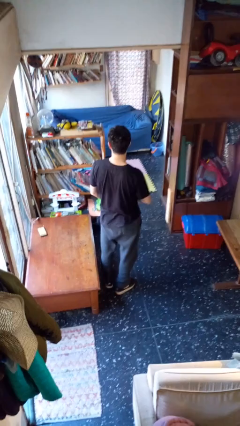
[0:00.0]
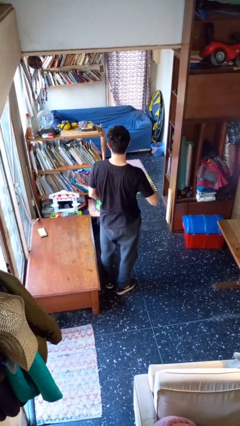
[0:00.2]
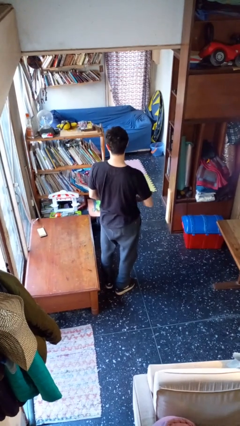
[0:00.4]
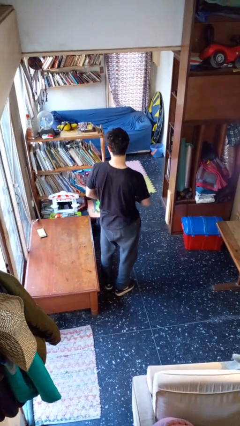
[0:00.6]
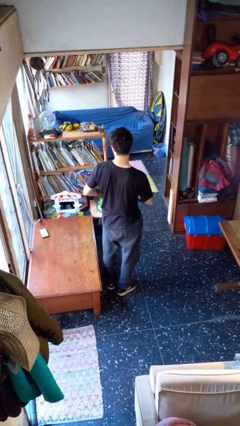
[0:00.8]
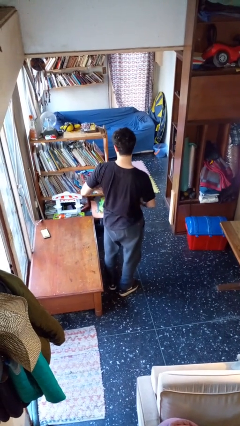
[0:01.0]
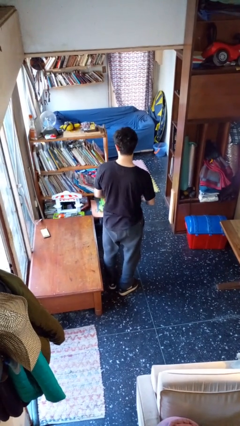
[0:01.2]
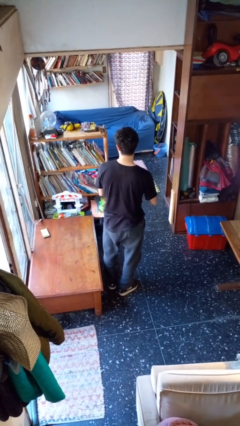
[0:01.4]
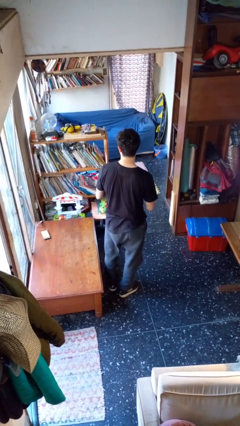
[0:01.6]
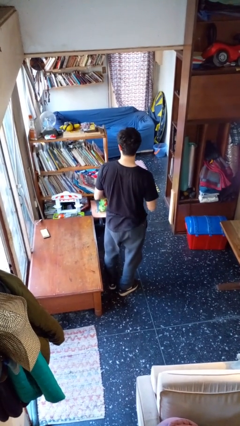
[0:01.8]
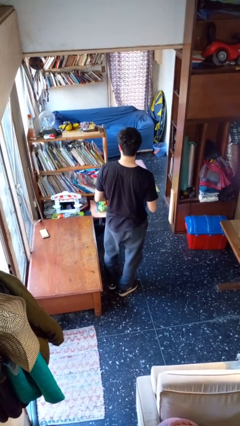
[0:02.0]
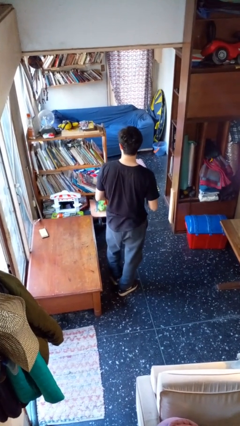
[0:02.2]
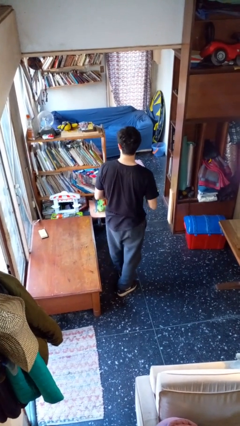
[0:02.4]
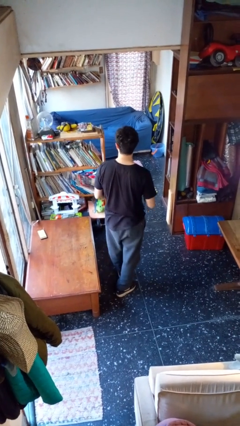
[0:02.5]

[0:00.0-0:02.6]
person takes off gloves

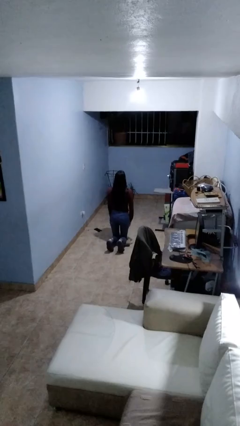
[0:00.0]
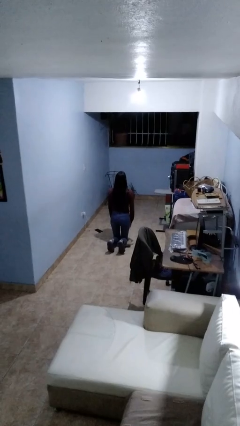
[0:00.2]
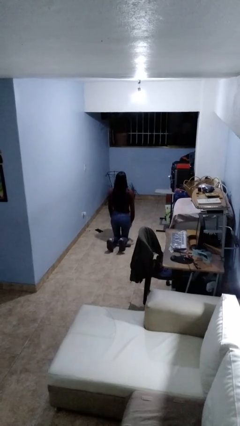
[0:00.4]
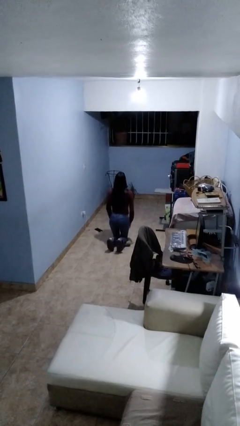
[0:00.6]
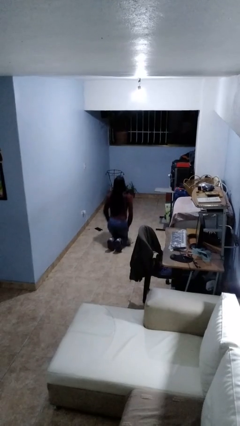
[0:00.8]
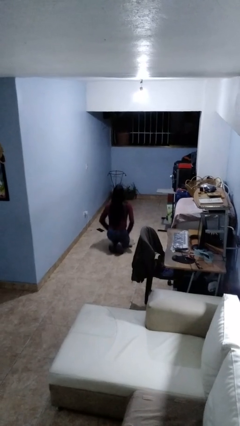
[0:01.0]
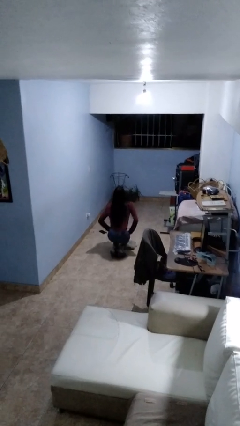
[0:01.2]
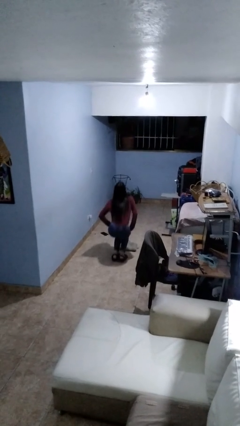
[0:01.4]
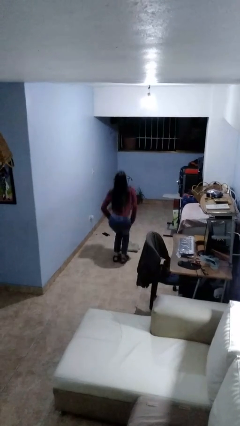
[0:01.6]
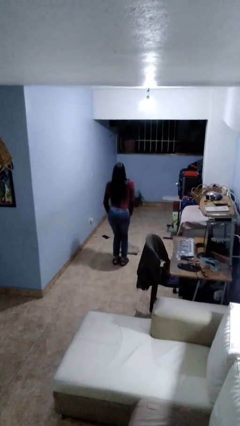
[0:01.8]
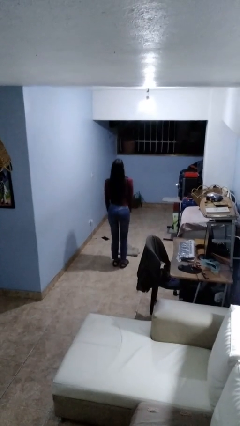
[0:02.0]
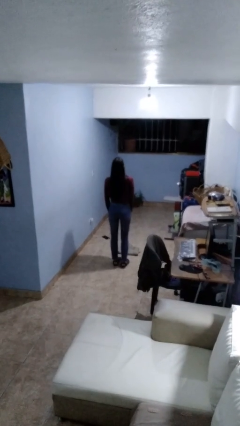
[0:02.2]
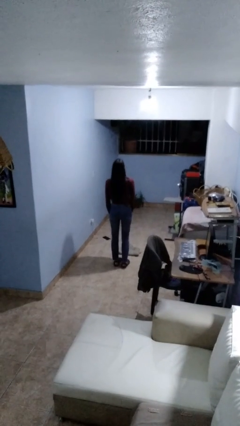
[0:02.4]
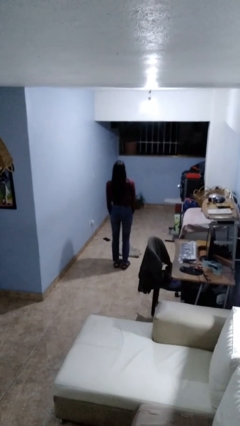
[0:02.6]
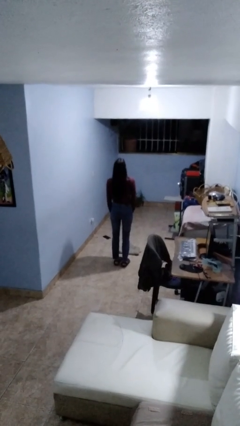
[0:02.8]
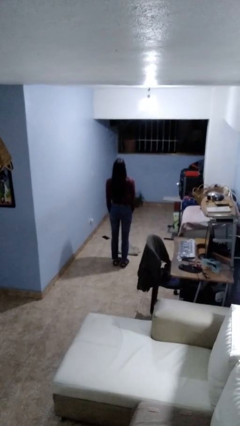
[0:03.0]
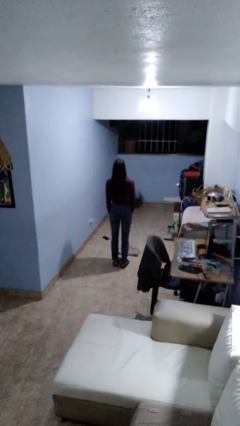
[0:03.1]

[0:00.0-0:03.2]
person stands up from floor

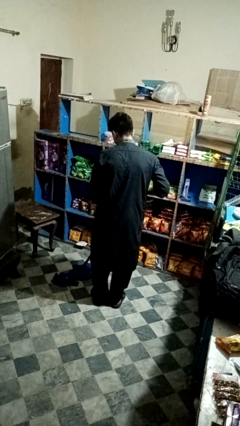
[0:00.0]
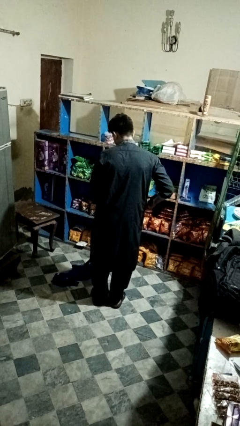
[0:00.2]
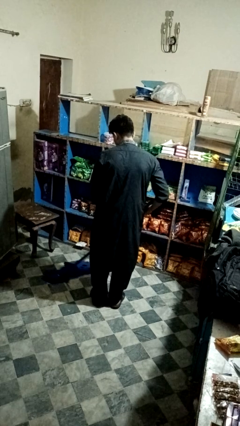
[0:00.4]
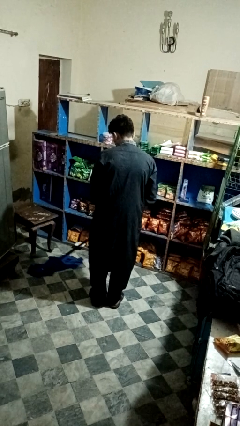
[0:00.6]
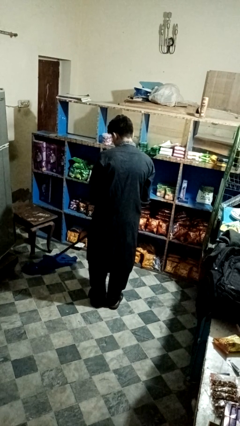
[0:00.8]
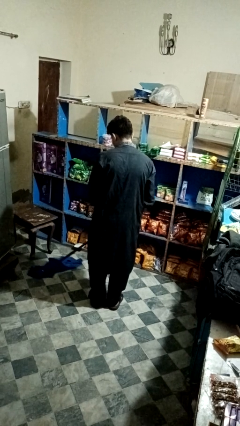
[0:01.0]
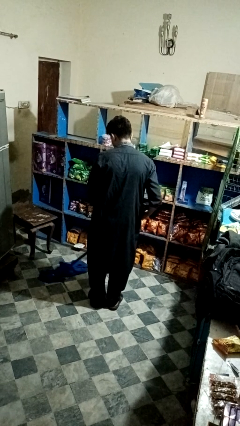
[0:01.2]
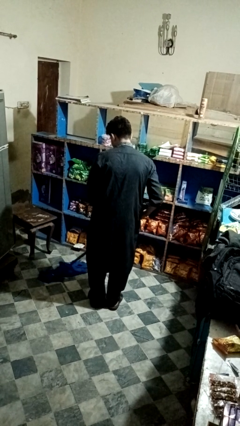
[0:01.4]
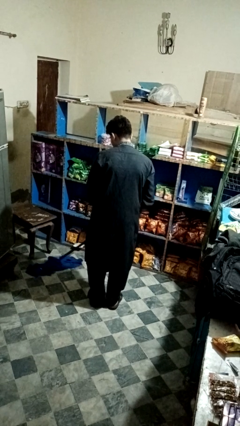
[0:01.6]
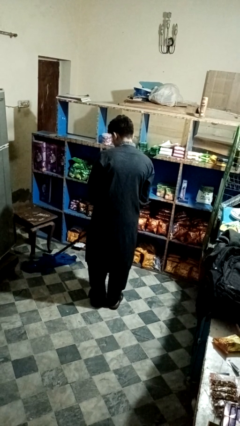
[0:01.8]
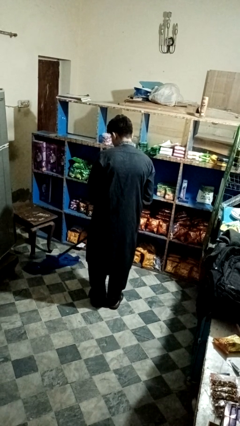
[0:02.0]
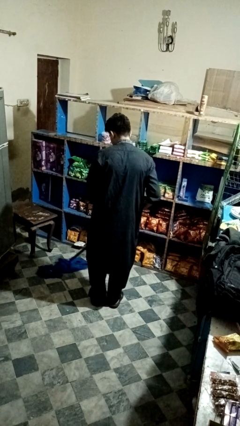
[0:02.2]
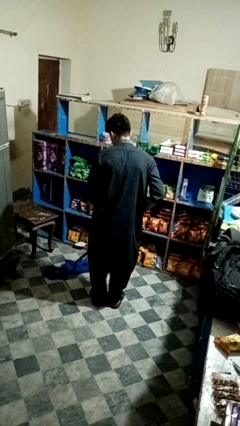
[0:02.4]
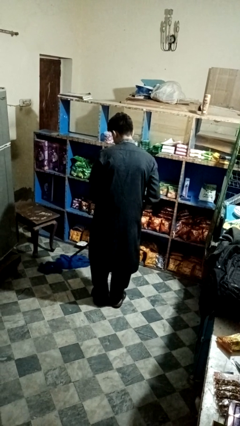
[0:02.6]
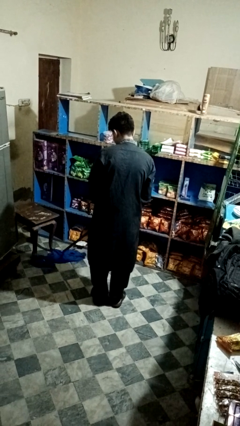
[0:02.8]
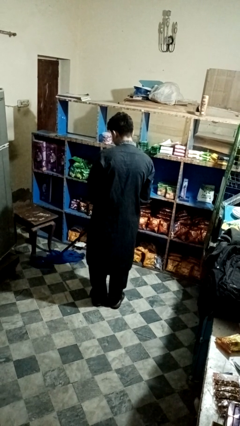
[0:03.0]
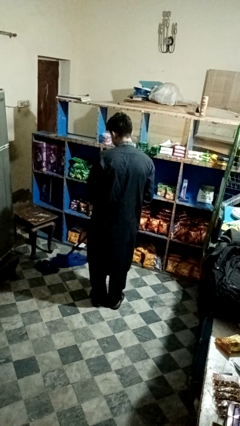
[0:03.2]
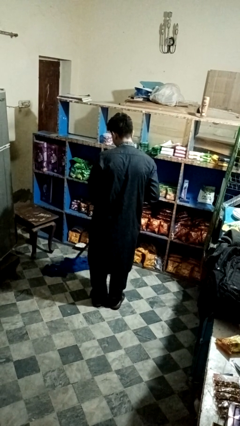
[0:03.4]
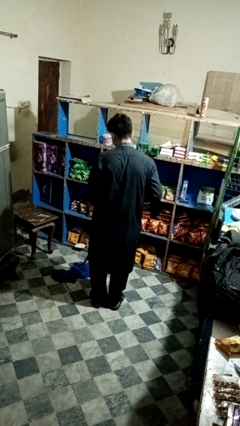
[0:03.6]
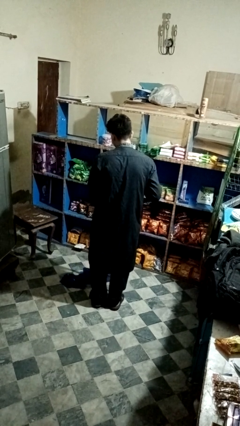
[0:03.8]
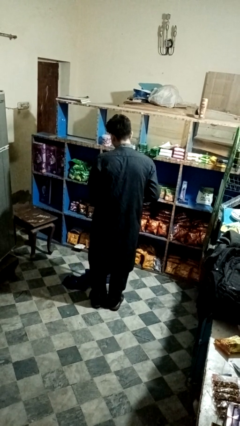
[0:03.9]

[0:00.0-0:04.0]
person mops

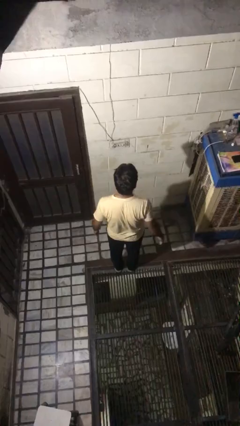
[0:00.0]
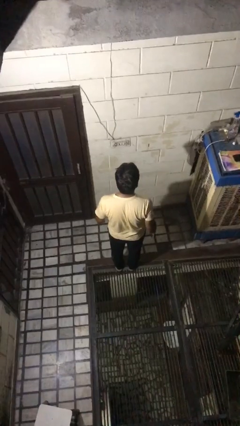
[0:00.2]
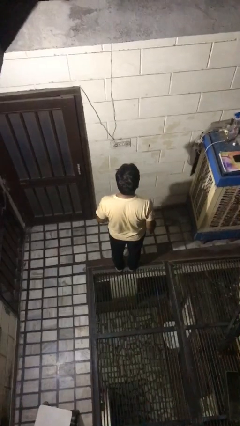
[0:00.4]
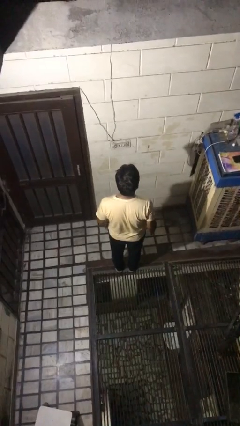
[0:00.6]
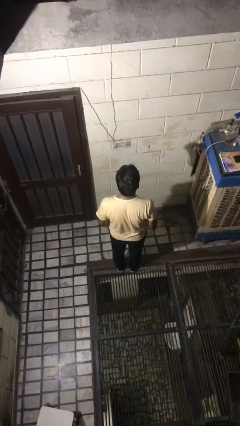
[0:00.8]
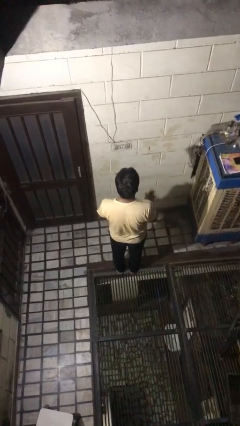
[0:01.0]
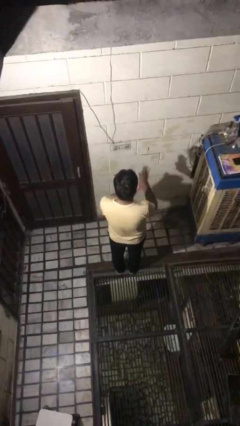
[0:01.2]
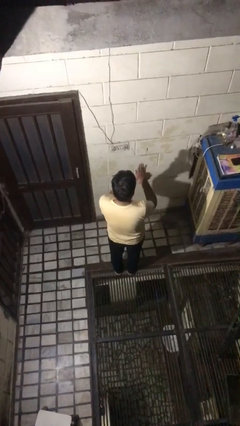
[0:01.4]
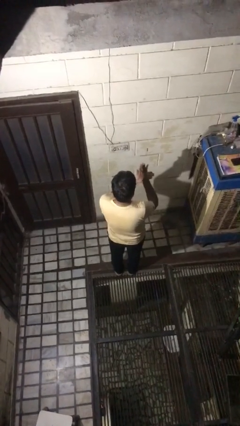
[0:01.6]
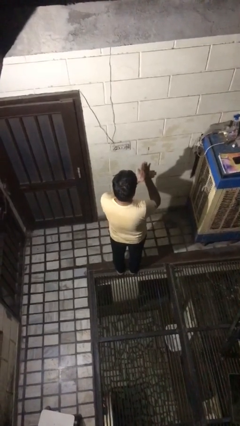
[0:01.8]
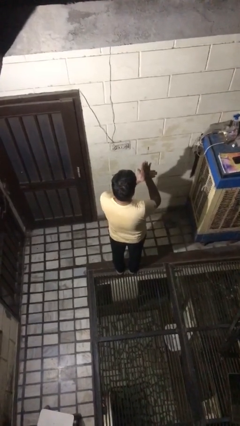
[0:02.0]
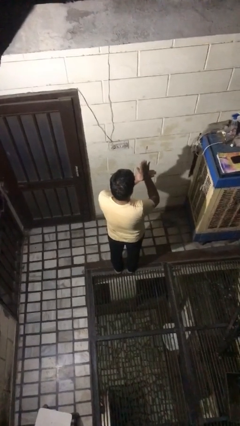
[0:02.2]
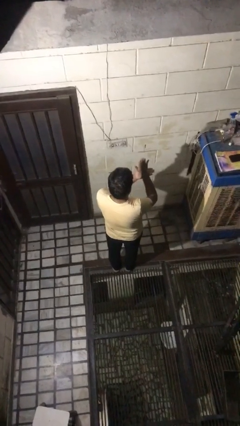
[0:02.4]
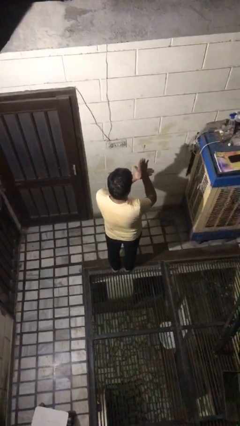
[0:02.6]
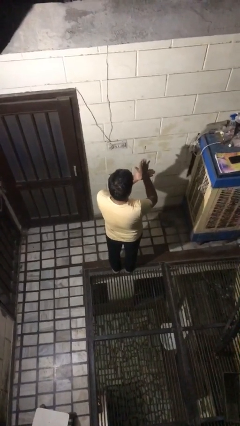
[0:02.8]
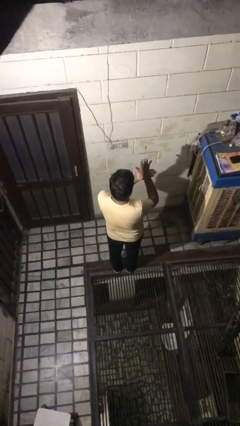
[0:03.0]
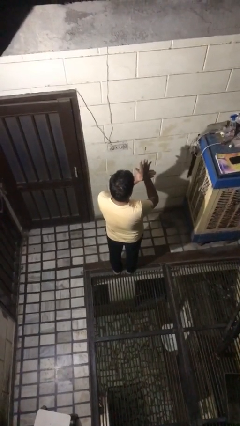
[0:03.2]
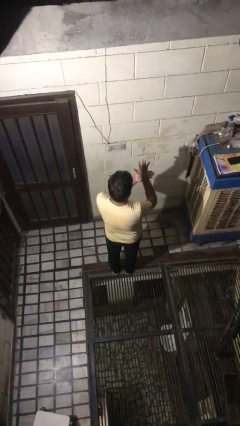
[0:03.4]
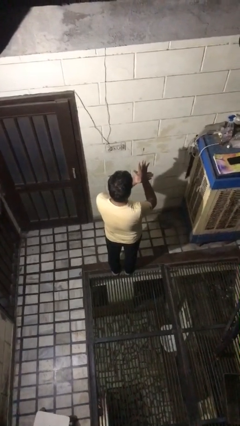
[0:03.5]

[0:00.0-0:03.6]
person gestures number five

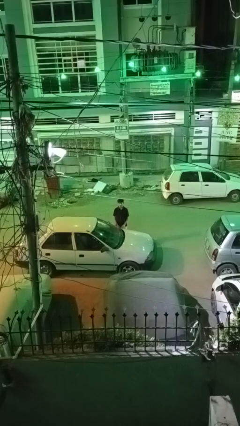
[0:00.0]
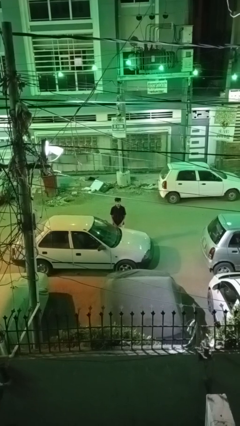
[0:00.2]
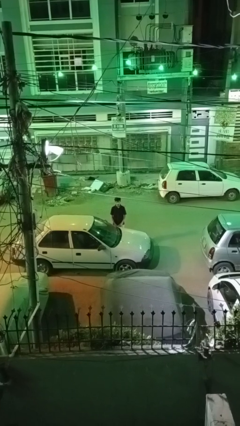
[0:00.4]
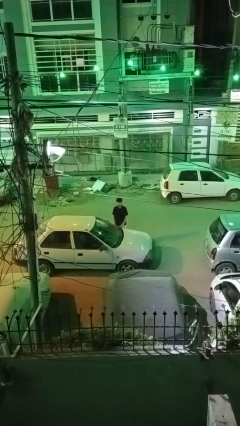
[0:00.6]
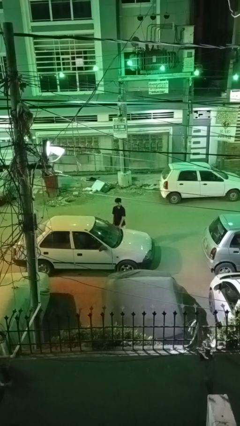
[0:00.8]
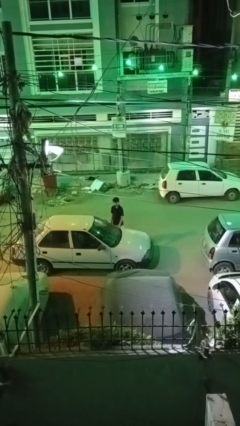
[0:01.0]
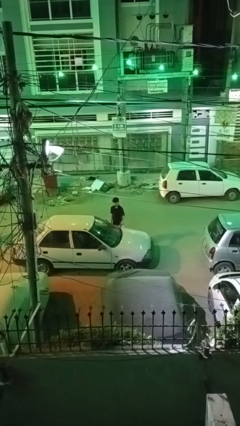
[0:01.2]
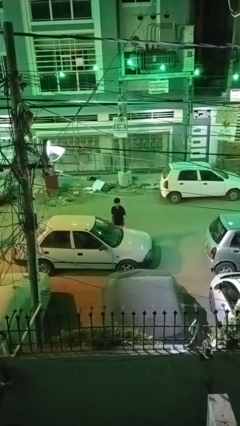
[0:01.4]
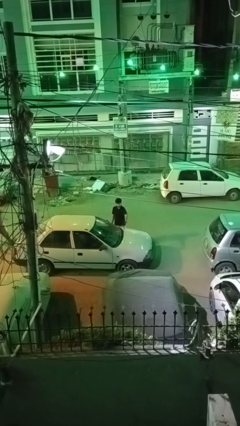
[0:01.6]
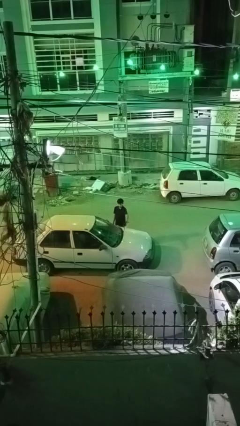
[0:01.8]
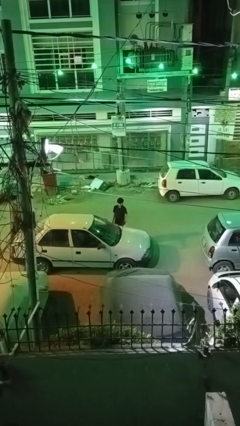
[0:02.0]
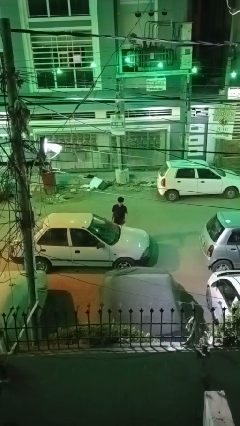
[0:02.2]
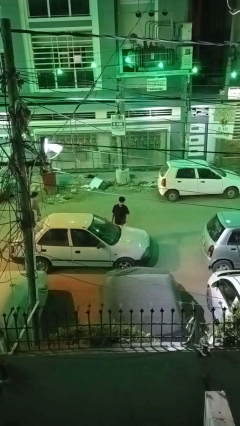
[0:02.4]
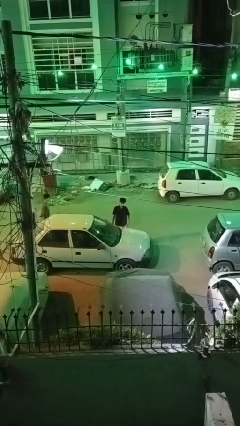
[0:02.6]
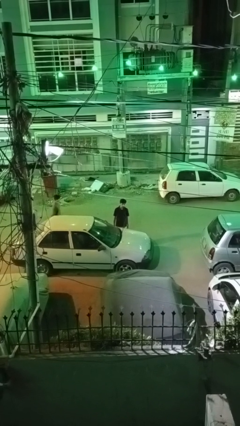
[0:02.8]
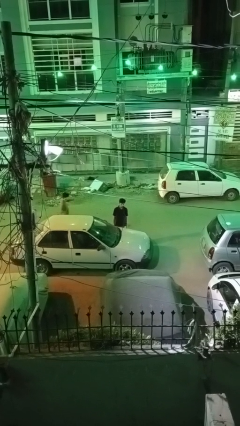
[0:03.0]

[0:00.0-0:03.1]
person flips up car wipers

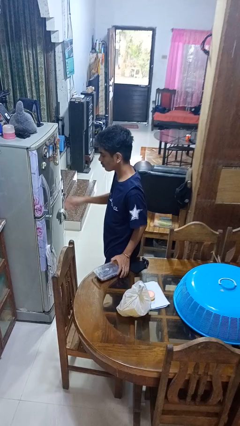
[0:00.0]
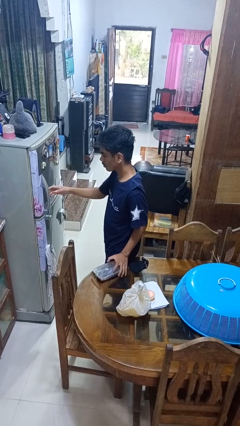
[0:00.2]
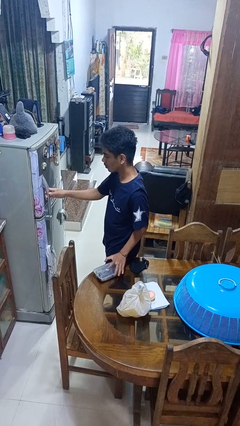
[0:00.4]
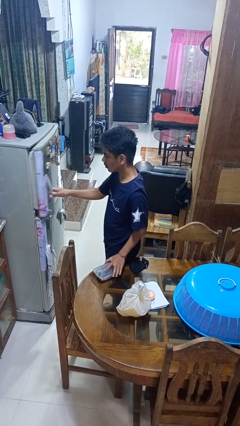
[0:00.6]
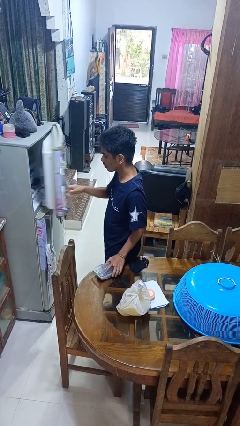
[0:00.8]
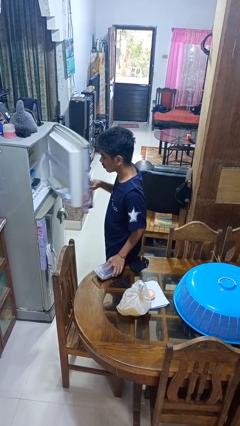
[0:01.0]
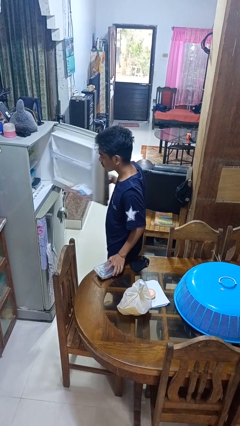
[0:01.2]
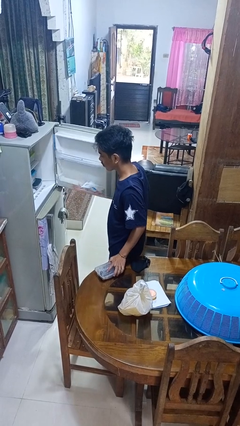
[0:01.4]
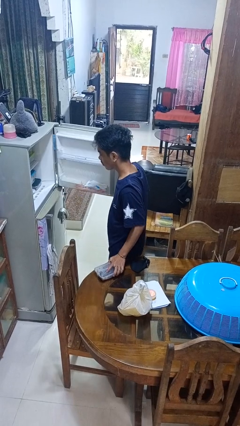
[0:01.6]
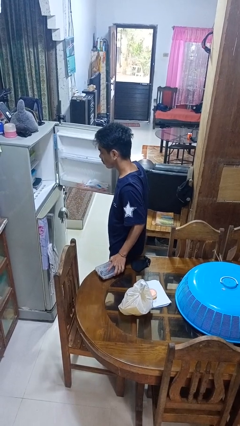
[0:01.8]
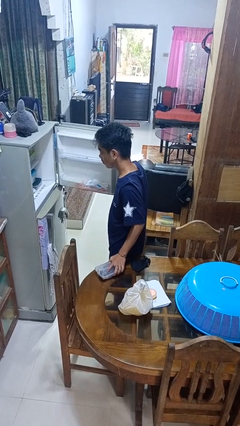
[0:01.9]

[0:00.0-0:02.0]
person opens refrigerator
